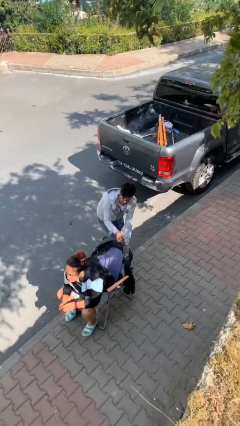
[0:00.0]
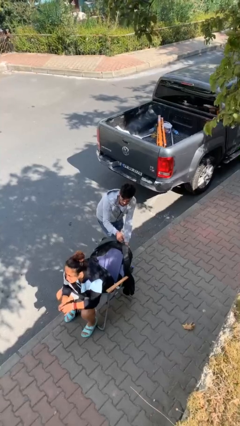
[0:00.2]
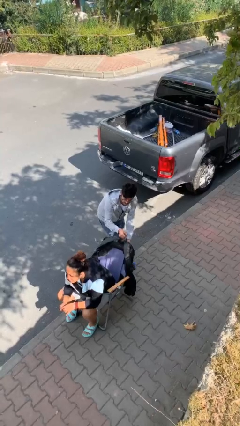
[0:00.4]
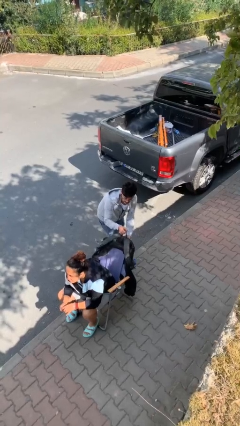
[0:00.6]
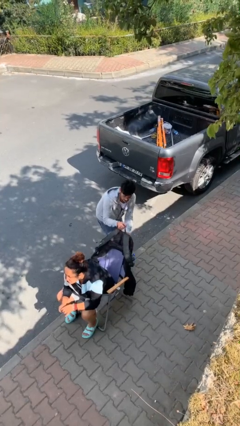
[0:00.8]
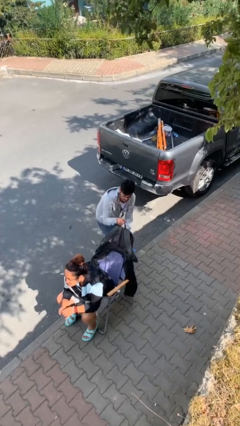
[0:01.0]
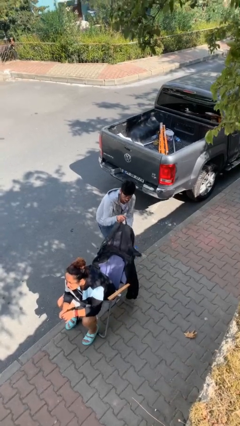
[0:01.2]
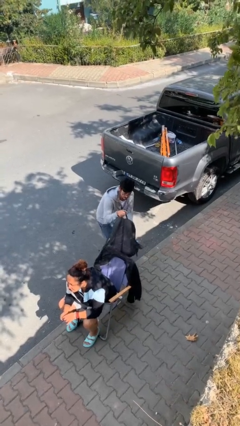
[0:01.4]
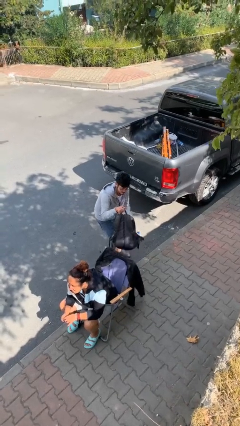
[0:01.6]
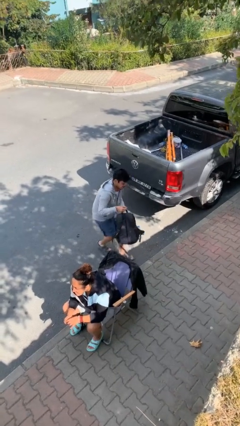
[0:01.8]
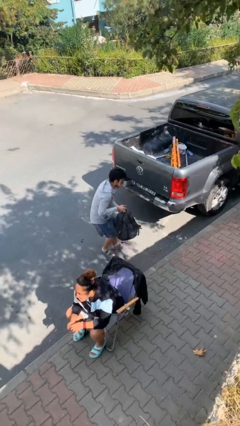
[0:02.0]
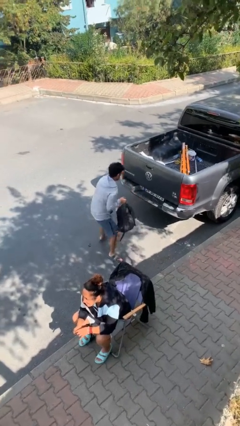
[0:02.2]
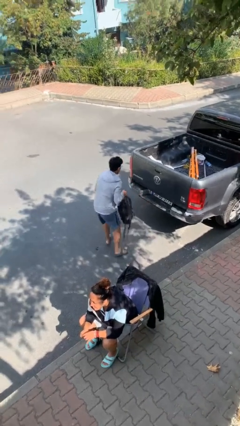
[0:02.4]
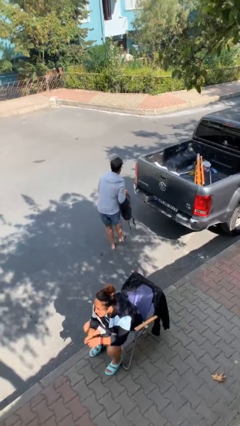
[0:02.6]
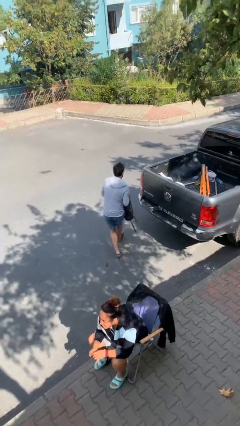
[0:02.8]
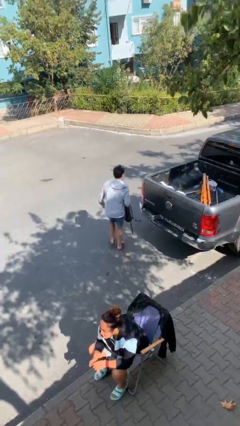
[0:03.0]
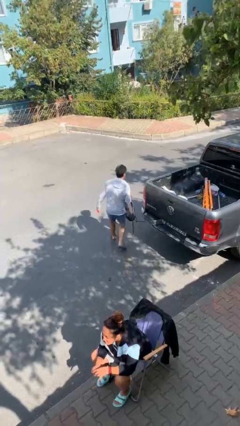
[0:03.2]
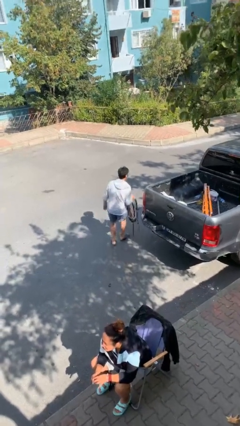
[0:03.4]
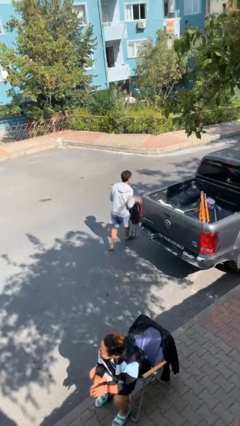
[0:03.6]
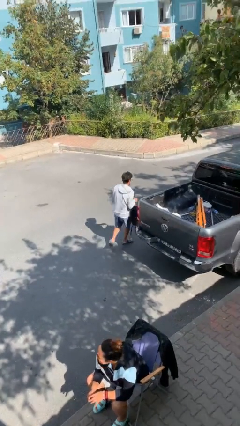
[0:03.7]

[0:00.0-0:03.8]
person steals object from person

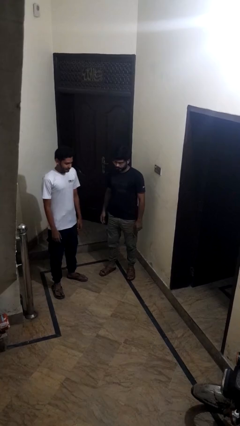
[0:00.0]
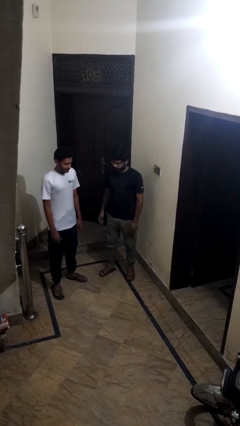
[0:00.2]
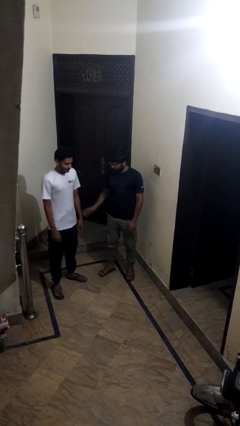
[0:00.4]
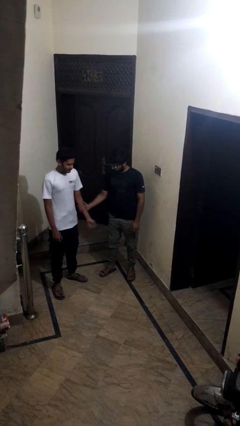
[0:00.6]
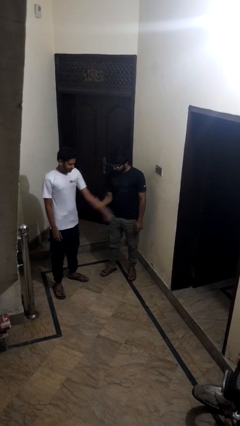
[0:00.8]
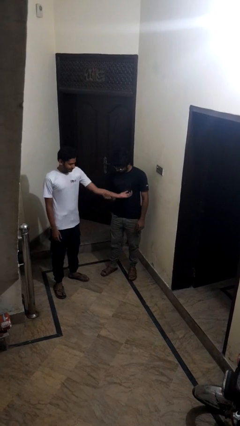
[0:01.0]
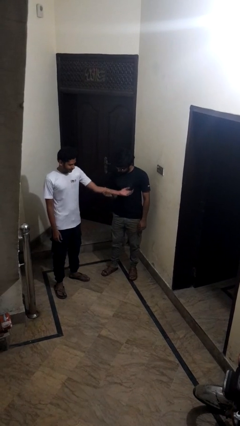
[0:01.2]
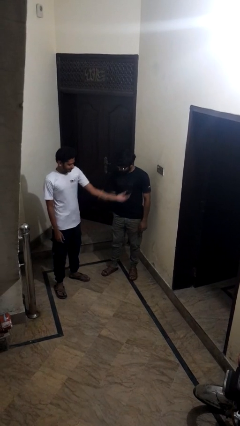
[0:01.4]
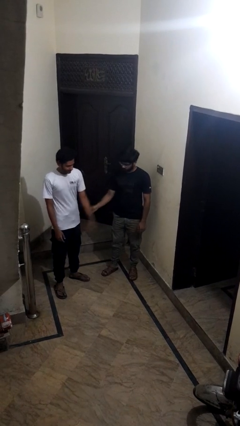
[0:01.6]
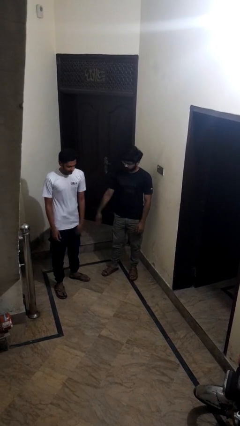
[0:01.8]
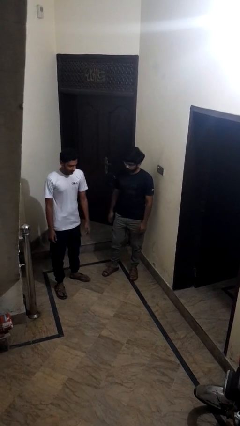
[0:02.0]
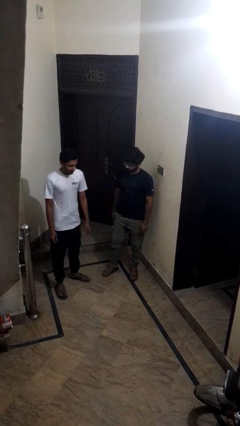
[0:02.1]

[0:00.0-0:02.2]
person grabs person by forearm

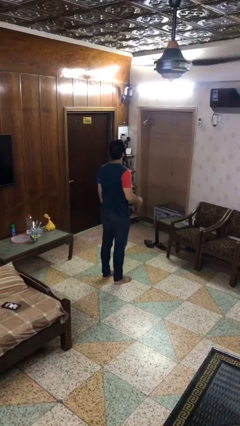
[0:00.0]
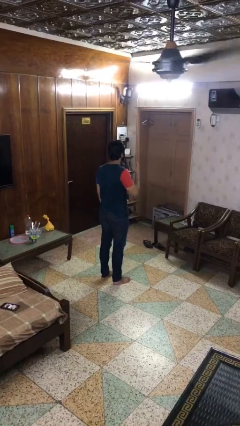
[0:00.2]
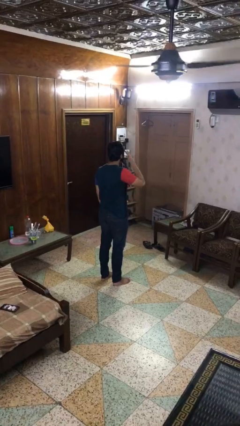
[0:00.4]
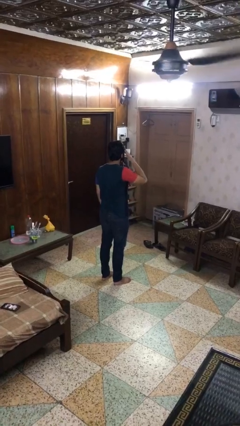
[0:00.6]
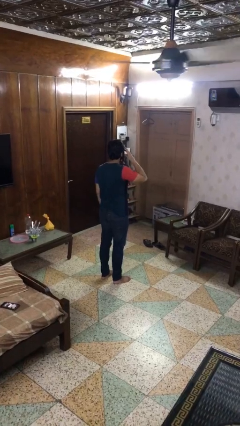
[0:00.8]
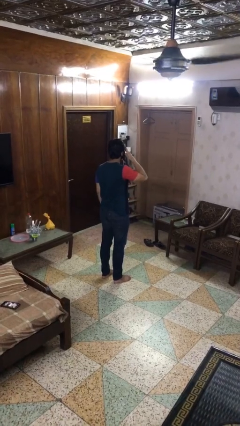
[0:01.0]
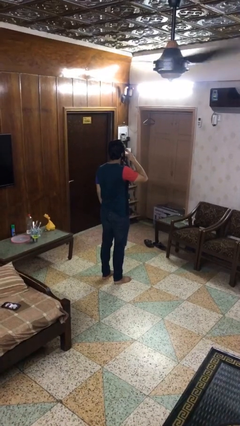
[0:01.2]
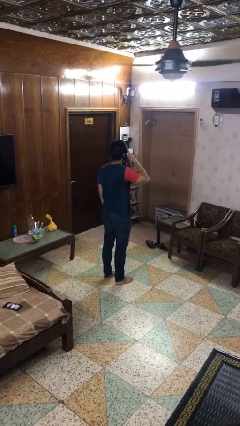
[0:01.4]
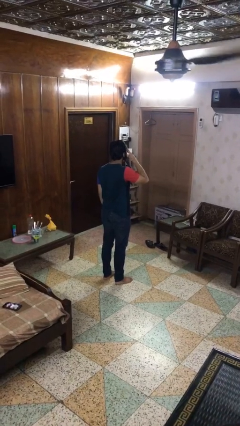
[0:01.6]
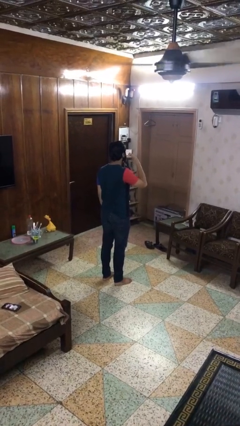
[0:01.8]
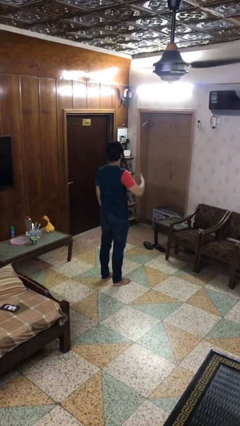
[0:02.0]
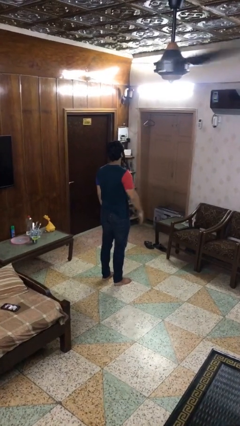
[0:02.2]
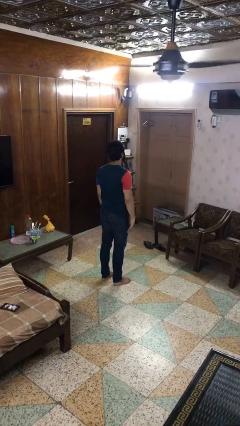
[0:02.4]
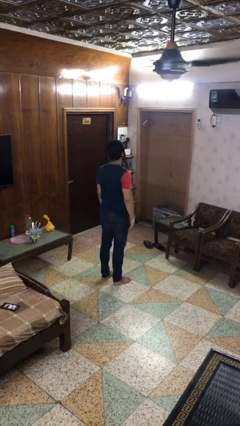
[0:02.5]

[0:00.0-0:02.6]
person rubs eyes

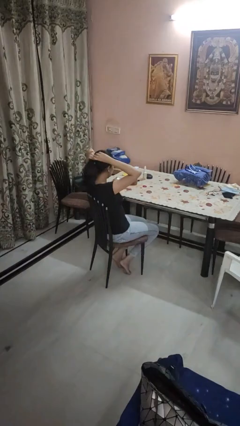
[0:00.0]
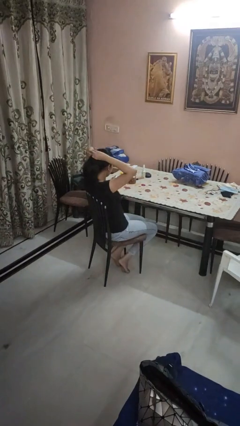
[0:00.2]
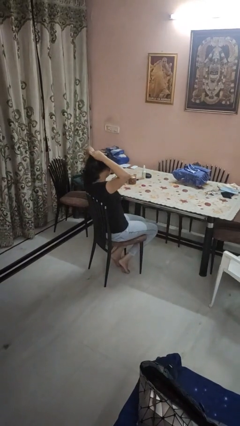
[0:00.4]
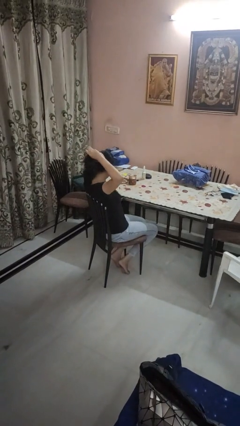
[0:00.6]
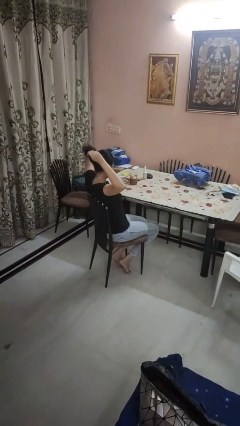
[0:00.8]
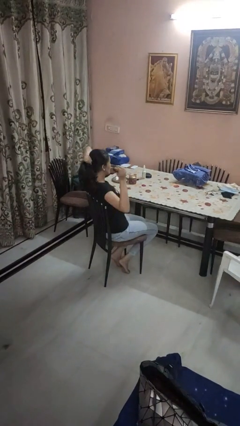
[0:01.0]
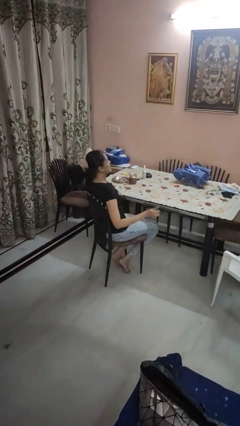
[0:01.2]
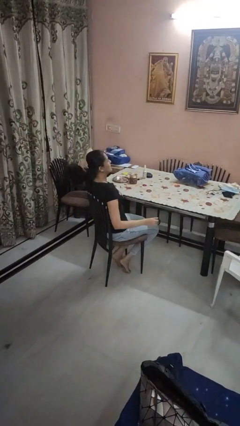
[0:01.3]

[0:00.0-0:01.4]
person takes off hairtie

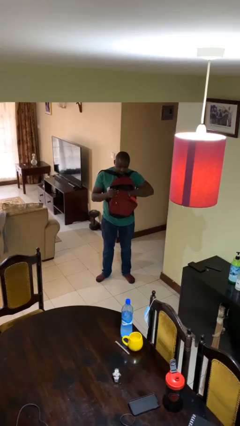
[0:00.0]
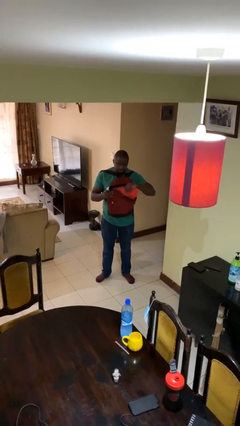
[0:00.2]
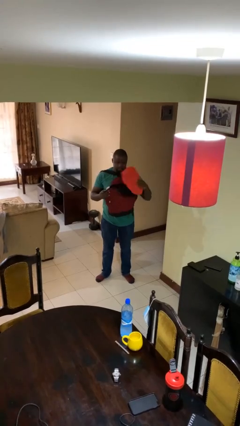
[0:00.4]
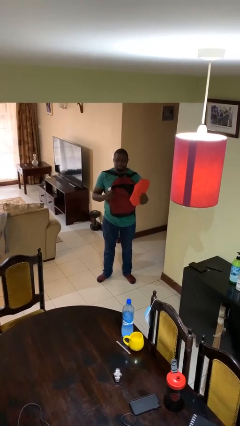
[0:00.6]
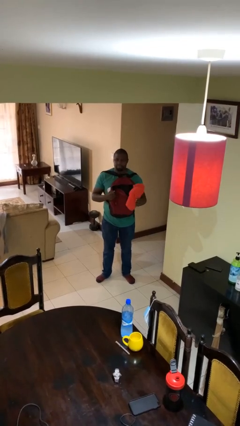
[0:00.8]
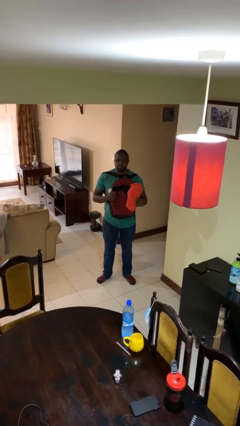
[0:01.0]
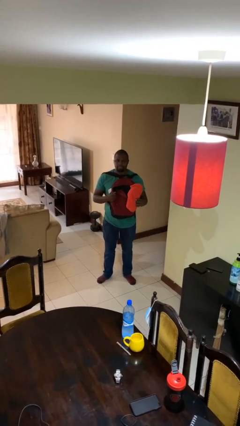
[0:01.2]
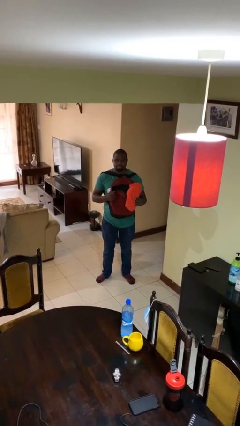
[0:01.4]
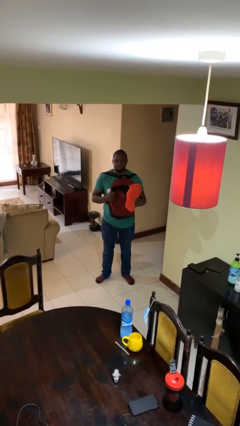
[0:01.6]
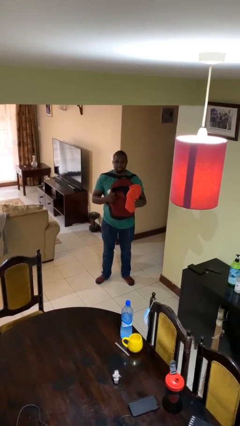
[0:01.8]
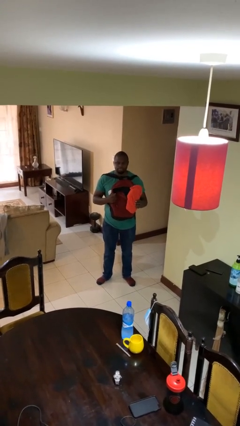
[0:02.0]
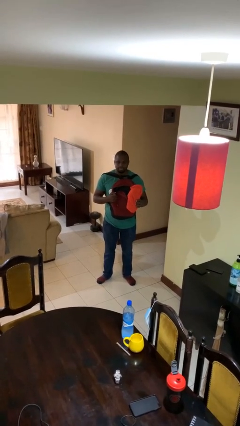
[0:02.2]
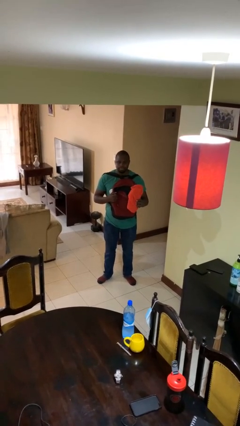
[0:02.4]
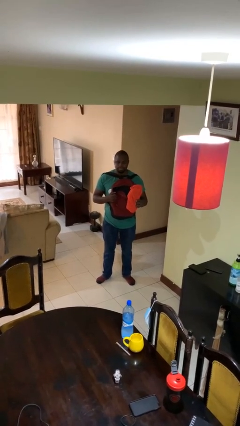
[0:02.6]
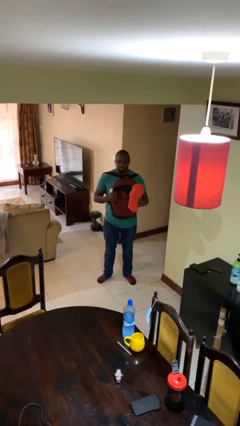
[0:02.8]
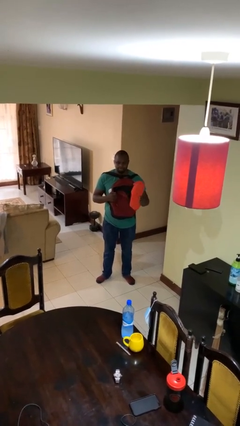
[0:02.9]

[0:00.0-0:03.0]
person takes object from backpack

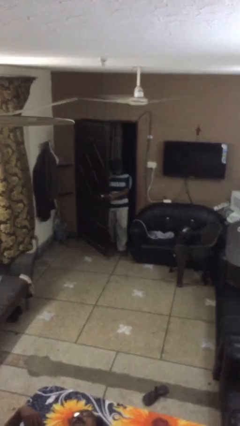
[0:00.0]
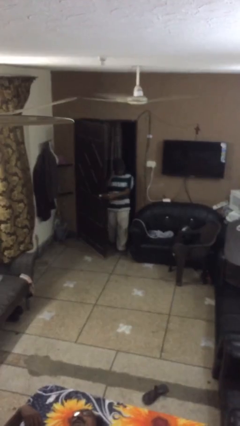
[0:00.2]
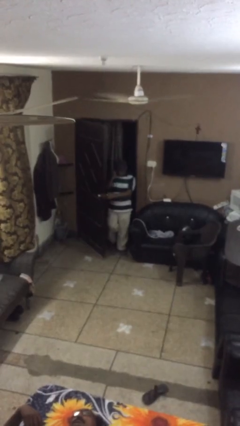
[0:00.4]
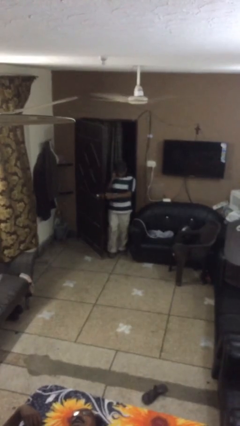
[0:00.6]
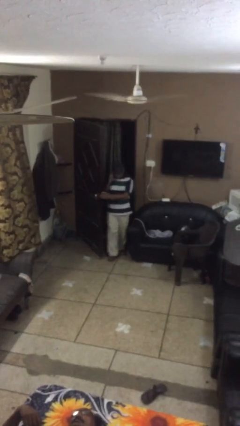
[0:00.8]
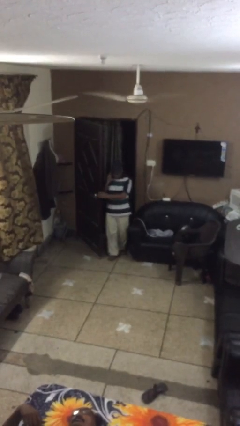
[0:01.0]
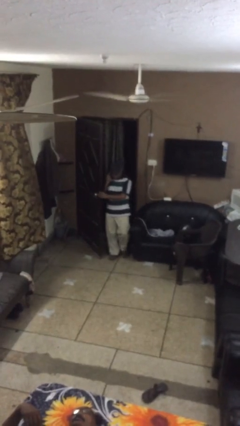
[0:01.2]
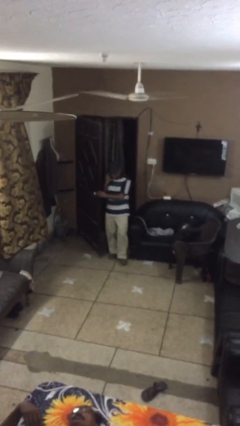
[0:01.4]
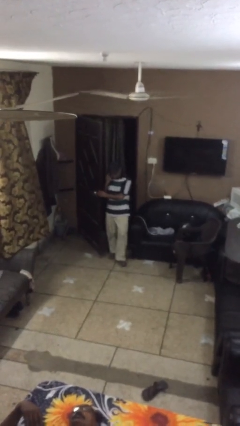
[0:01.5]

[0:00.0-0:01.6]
person enters scene through structure

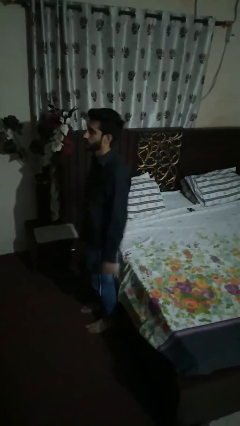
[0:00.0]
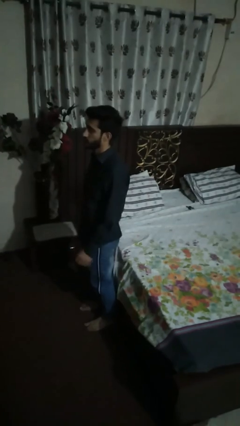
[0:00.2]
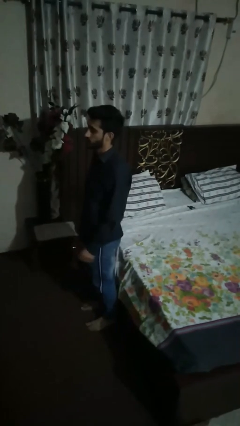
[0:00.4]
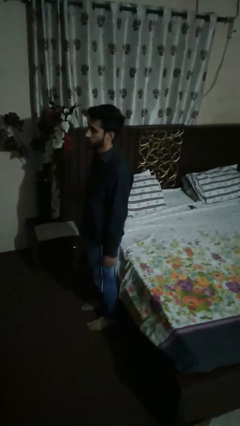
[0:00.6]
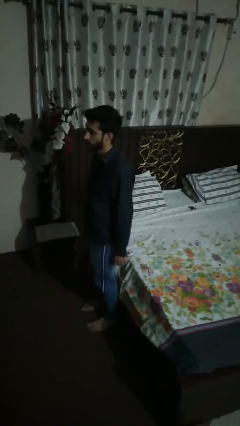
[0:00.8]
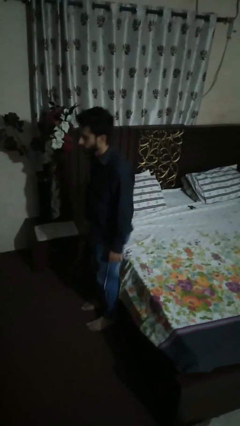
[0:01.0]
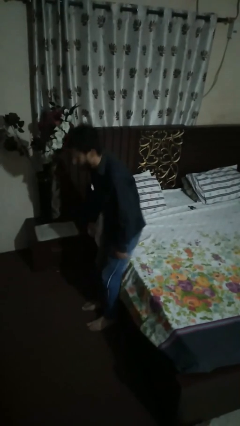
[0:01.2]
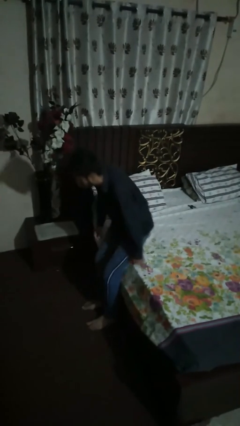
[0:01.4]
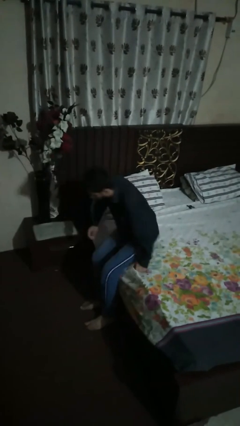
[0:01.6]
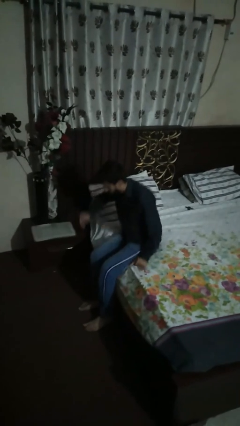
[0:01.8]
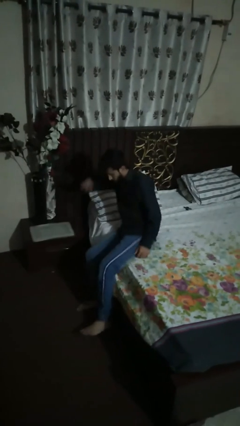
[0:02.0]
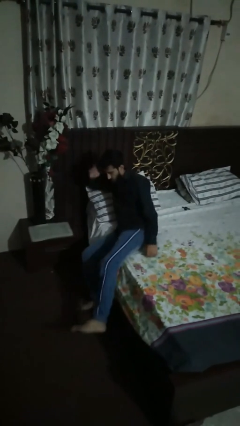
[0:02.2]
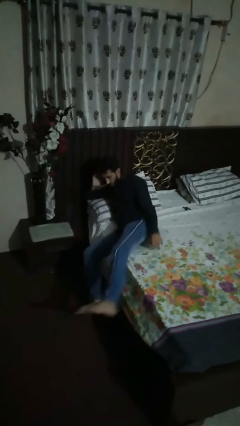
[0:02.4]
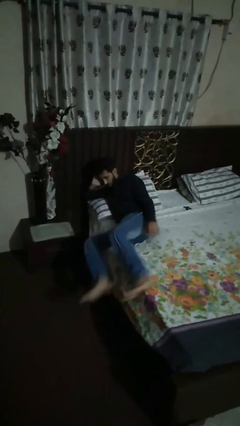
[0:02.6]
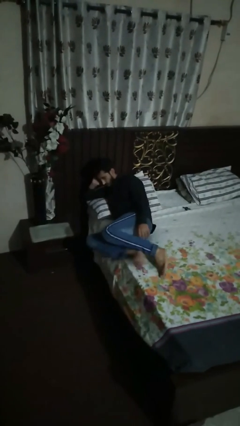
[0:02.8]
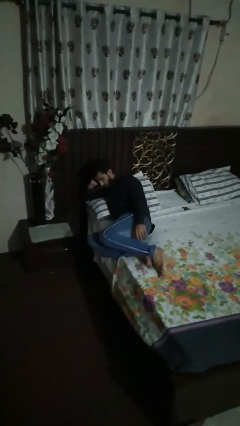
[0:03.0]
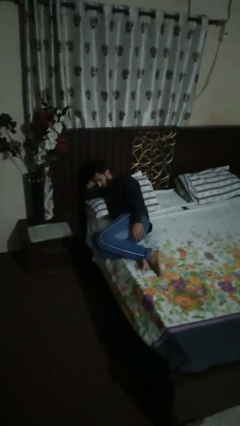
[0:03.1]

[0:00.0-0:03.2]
person lies down on bed
